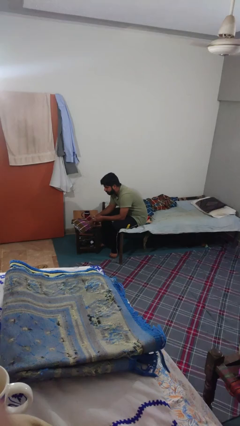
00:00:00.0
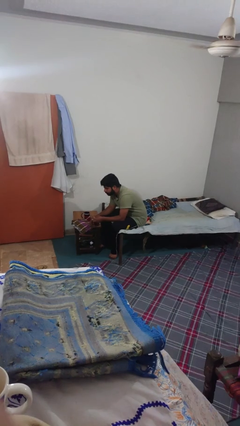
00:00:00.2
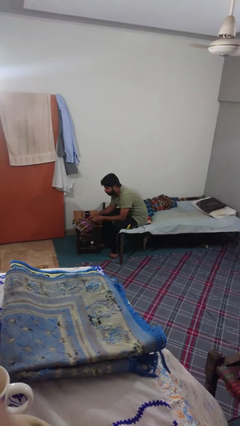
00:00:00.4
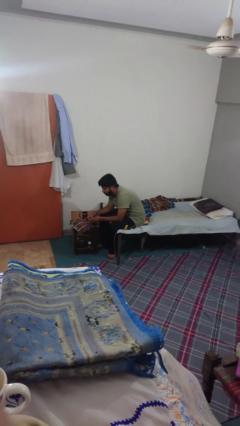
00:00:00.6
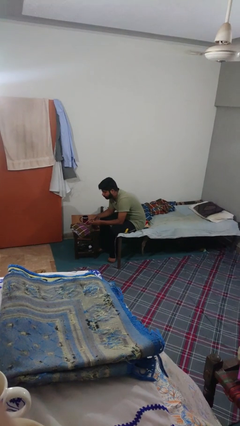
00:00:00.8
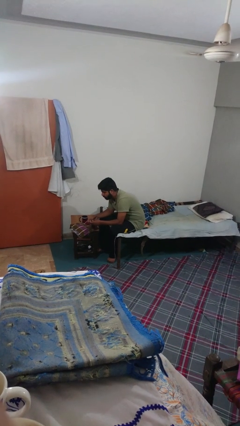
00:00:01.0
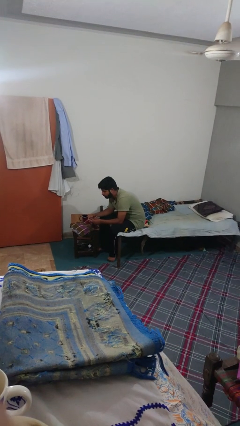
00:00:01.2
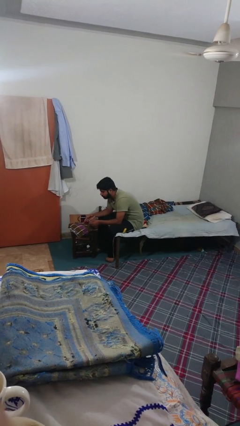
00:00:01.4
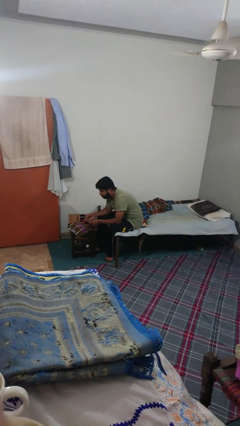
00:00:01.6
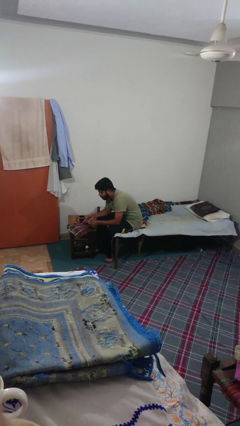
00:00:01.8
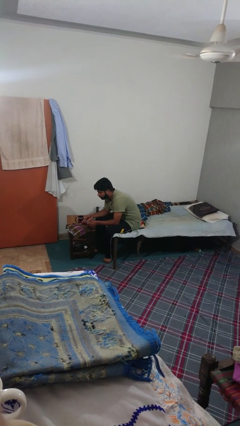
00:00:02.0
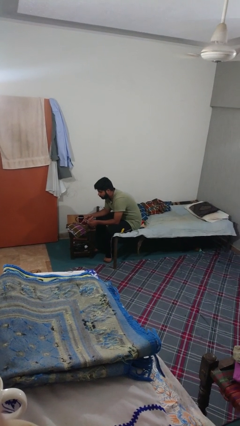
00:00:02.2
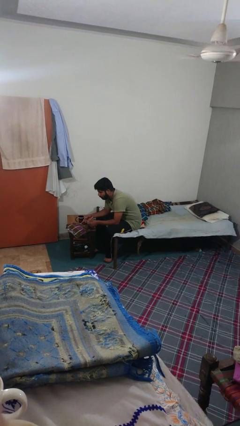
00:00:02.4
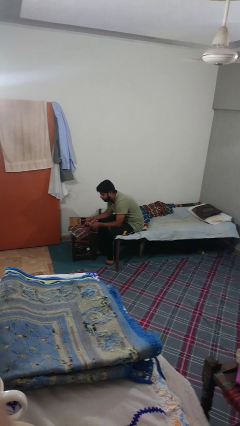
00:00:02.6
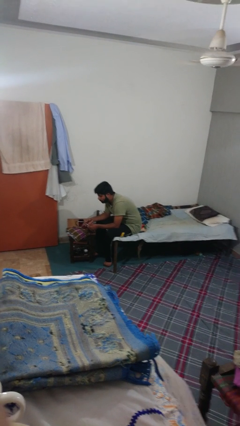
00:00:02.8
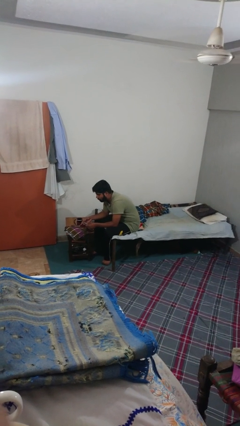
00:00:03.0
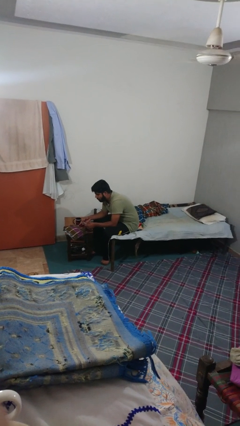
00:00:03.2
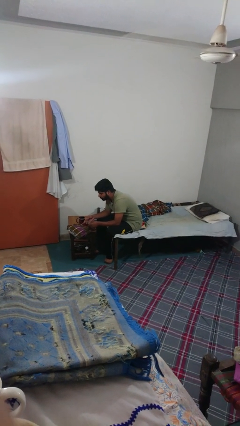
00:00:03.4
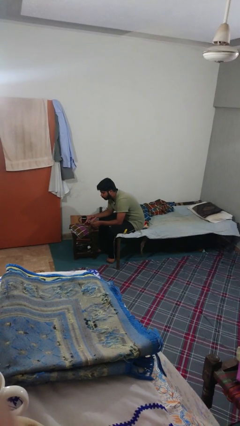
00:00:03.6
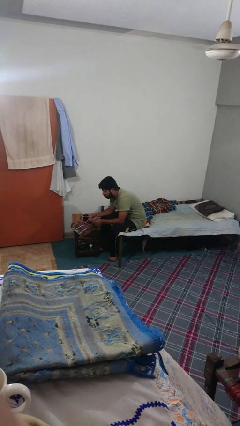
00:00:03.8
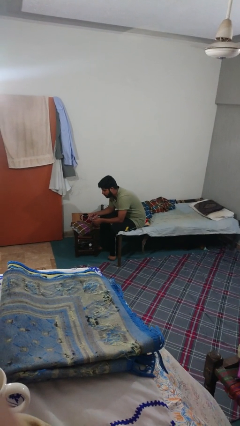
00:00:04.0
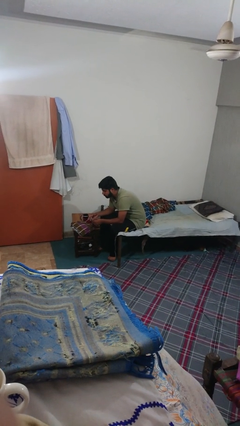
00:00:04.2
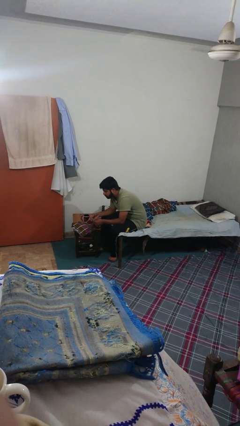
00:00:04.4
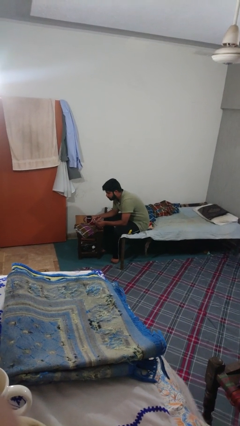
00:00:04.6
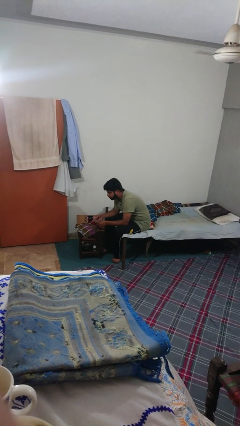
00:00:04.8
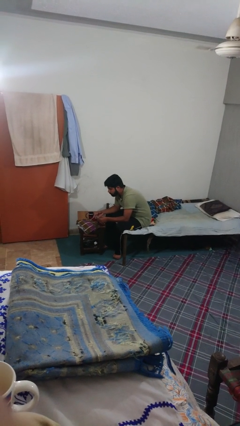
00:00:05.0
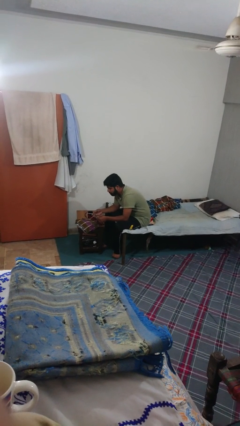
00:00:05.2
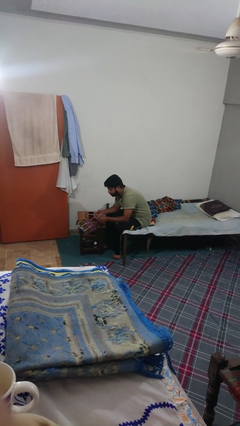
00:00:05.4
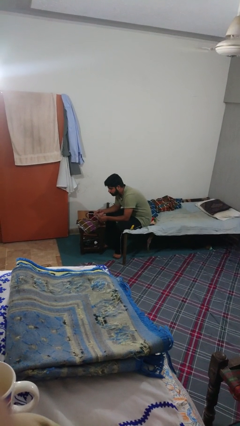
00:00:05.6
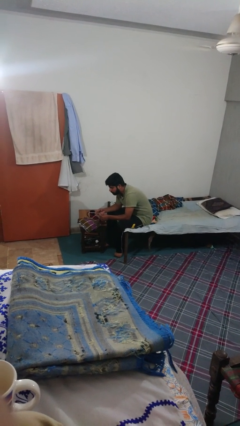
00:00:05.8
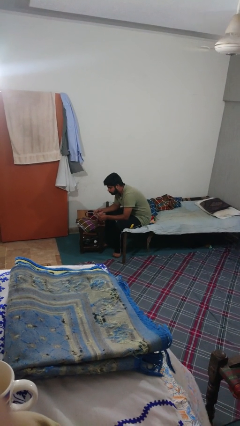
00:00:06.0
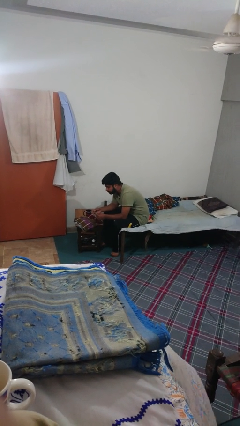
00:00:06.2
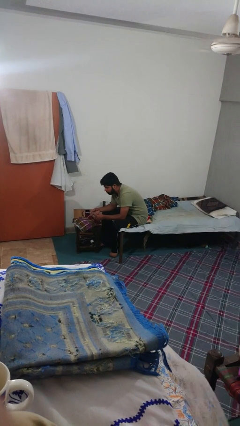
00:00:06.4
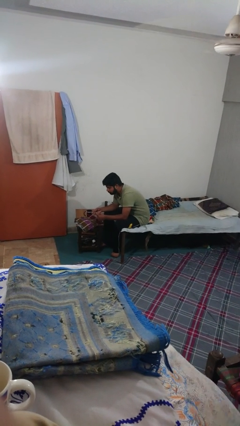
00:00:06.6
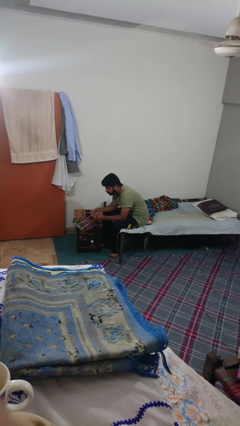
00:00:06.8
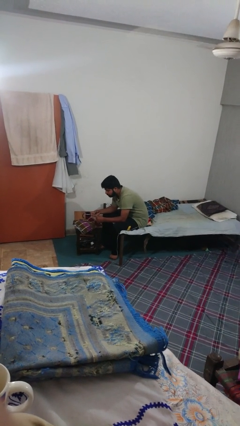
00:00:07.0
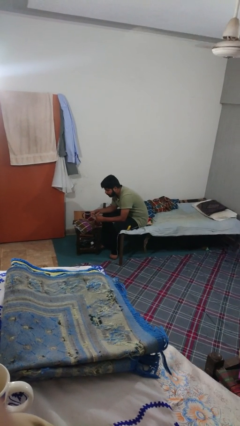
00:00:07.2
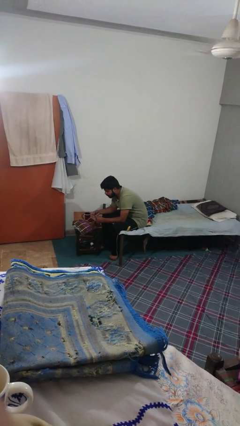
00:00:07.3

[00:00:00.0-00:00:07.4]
person clips fingernails

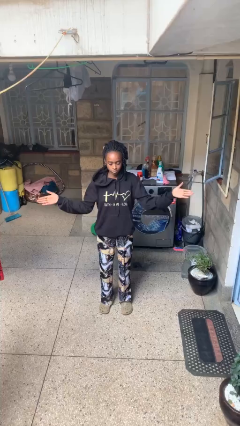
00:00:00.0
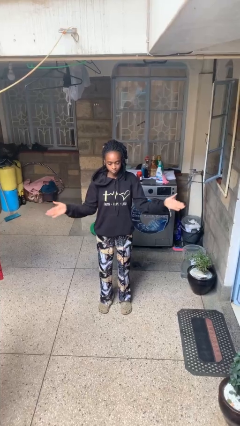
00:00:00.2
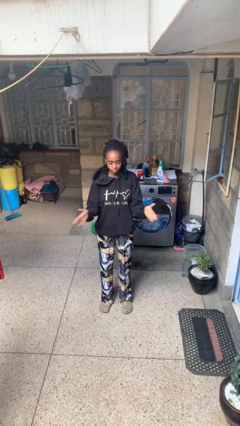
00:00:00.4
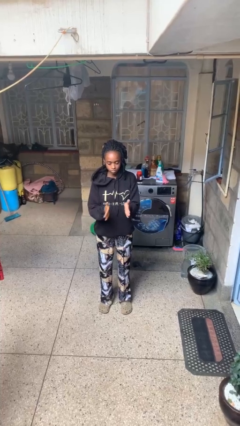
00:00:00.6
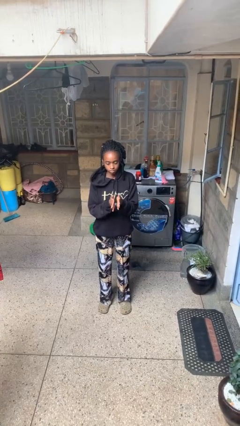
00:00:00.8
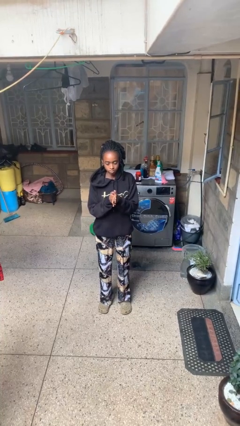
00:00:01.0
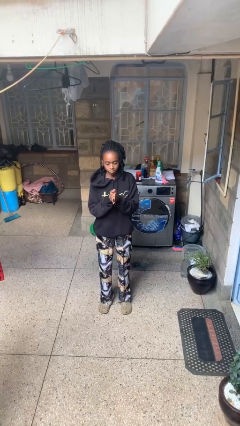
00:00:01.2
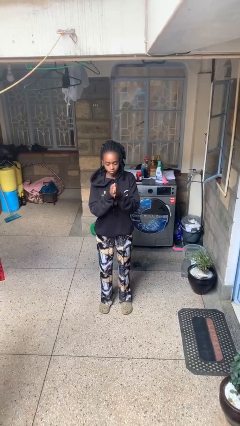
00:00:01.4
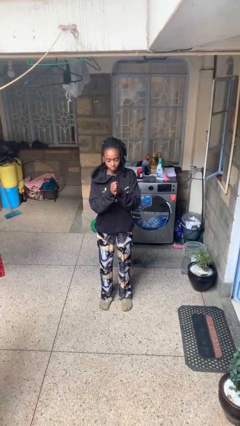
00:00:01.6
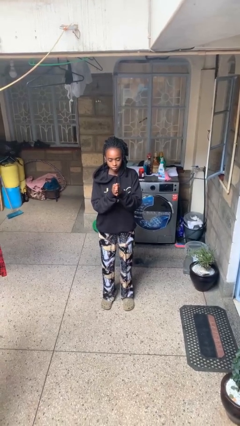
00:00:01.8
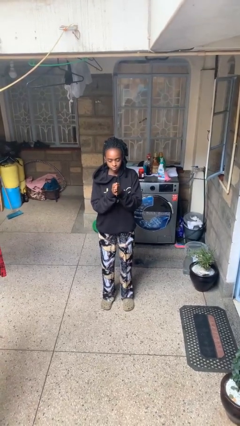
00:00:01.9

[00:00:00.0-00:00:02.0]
person gestures zoom out

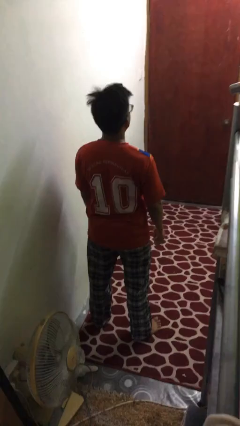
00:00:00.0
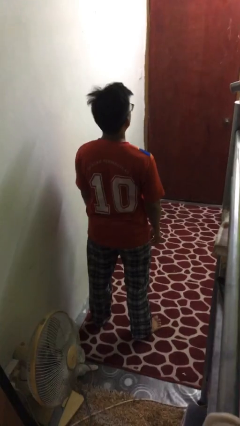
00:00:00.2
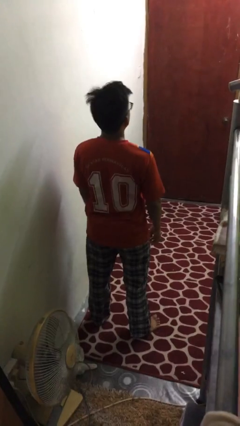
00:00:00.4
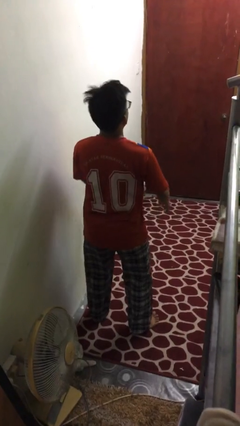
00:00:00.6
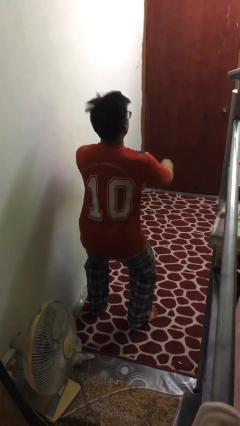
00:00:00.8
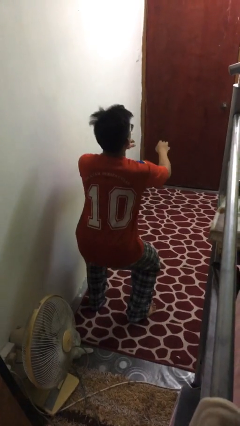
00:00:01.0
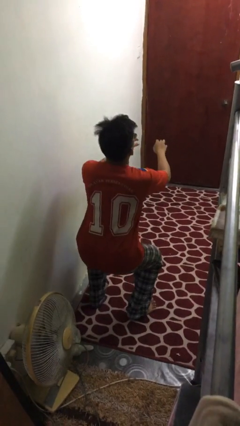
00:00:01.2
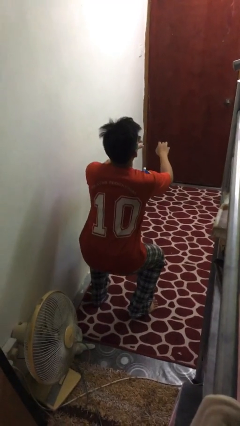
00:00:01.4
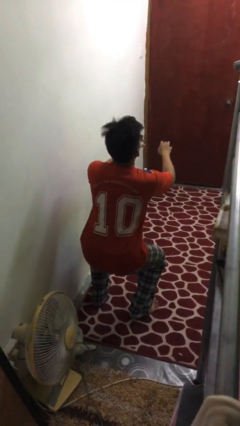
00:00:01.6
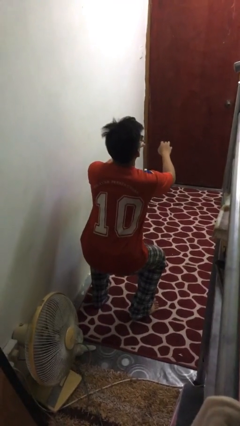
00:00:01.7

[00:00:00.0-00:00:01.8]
person squats

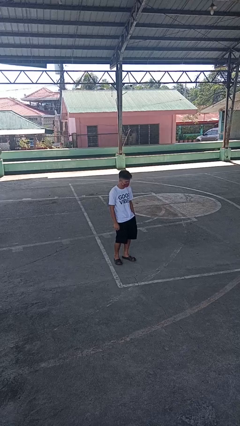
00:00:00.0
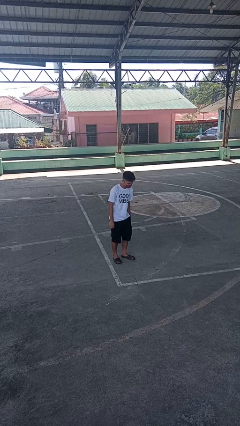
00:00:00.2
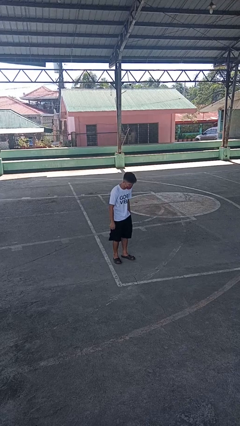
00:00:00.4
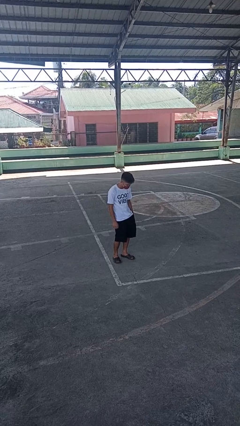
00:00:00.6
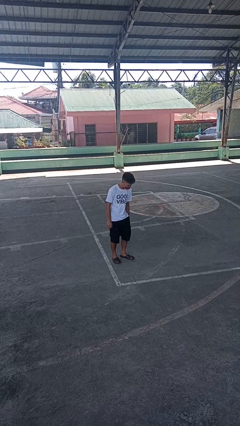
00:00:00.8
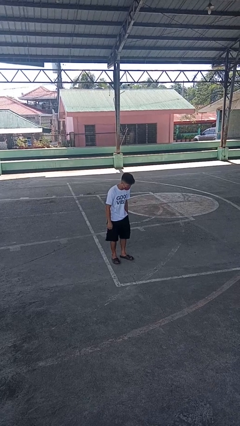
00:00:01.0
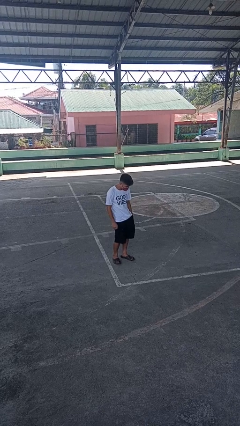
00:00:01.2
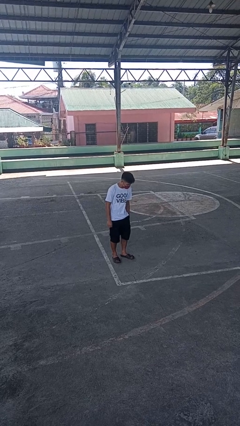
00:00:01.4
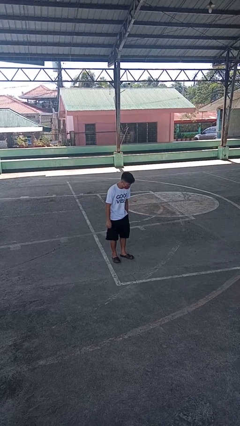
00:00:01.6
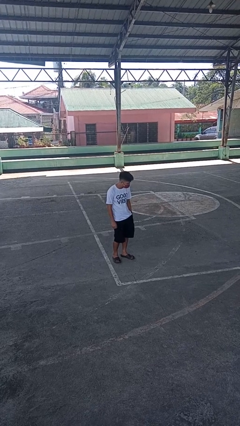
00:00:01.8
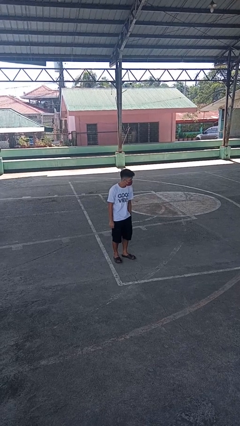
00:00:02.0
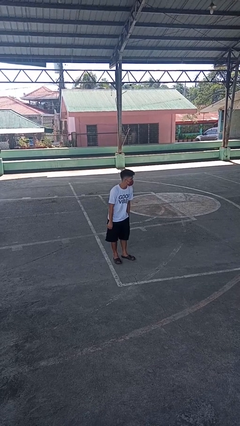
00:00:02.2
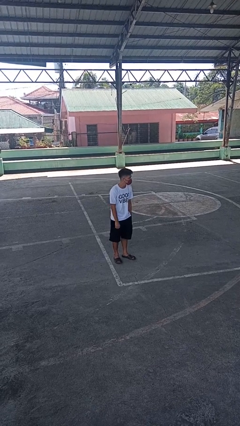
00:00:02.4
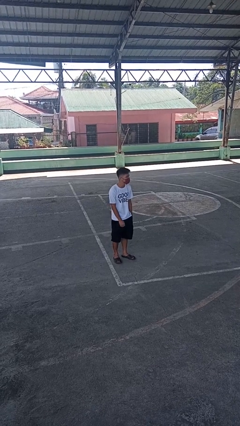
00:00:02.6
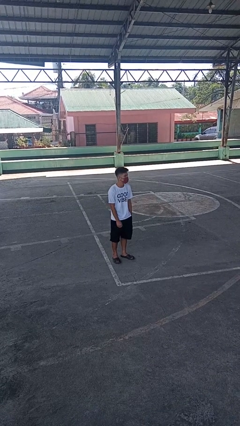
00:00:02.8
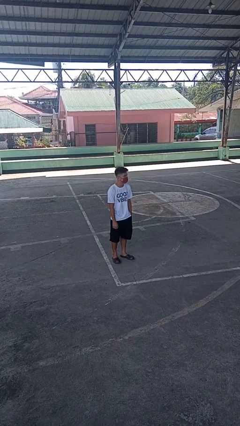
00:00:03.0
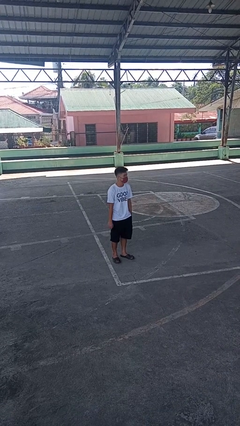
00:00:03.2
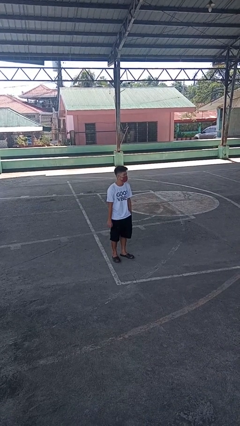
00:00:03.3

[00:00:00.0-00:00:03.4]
person wiggles hips

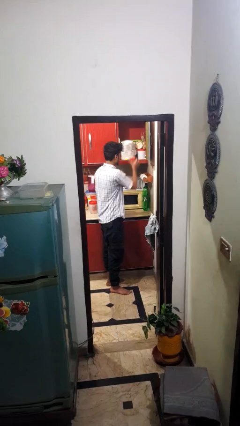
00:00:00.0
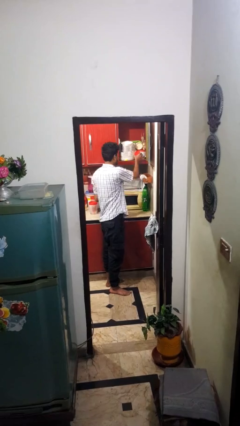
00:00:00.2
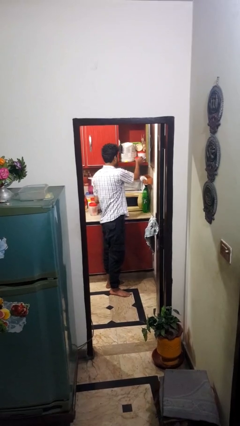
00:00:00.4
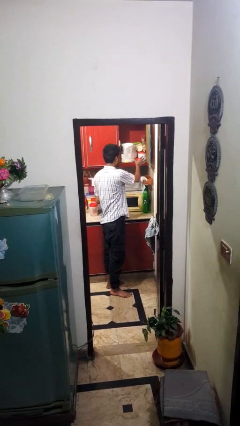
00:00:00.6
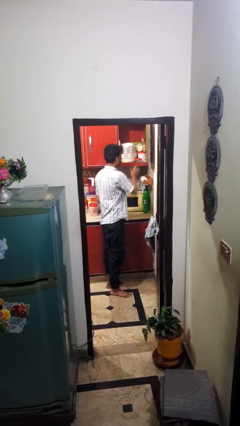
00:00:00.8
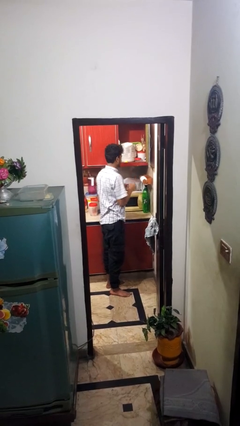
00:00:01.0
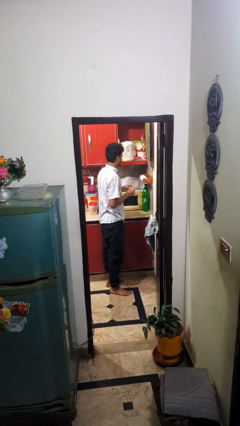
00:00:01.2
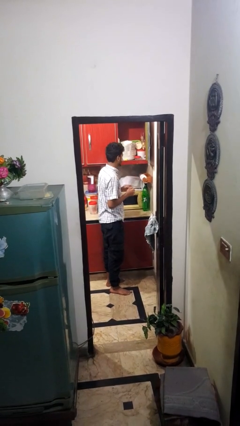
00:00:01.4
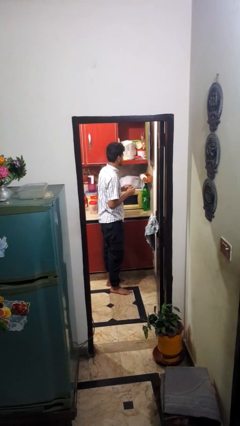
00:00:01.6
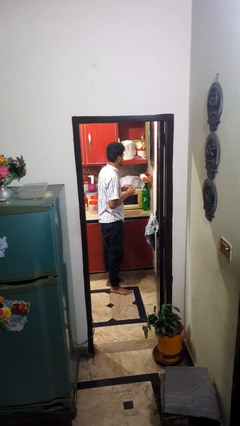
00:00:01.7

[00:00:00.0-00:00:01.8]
person puts down object into cabinet

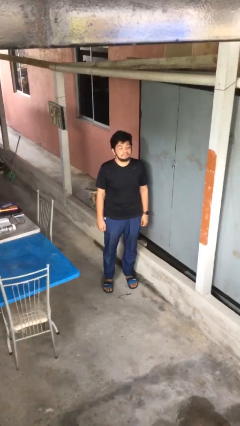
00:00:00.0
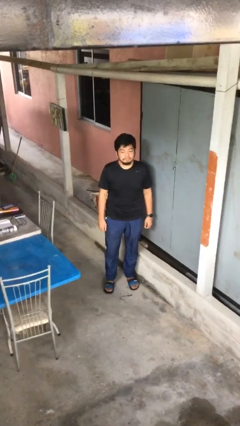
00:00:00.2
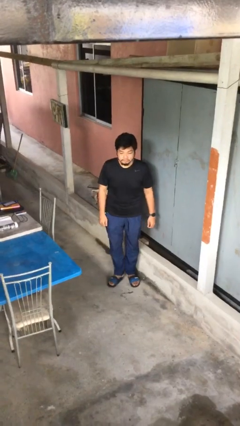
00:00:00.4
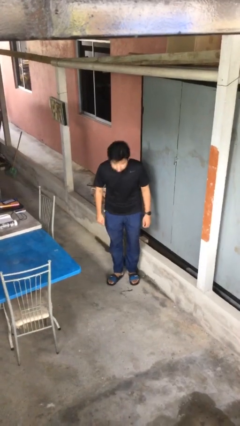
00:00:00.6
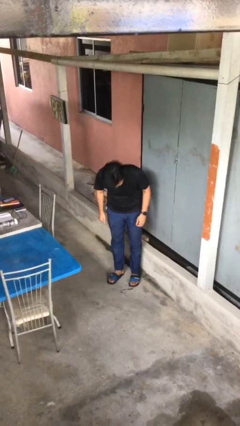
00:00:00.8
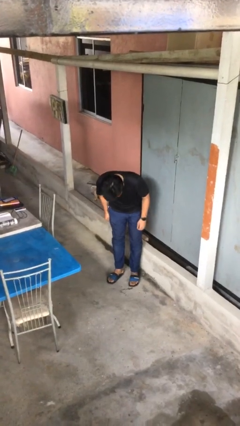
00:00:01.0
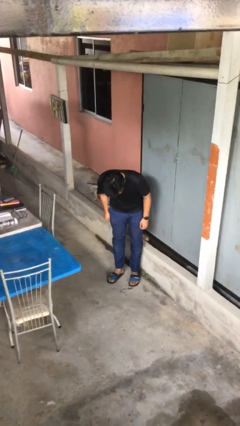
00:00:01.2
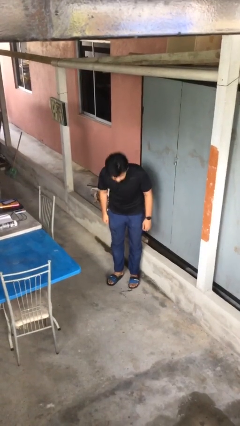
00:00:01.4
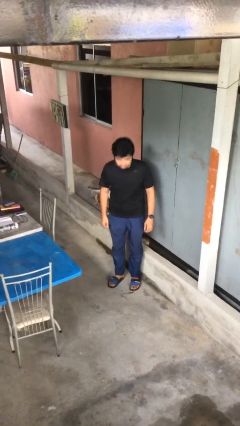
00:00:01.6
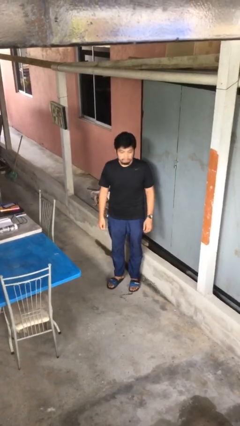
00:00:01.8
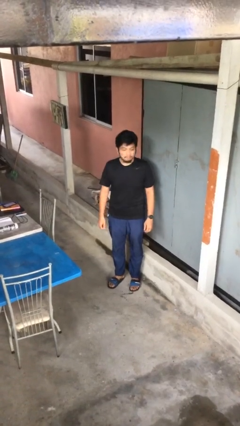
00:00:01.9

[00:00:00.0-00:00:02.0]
person bows
